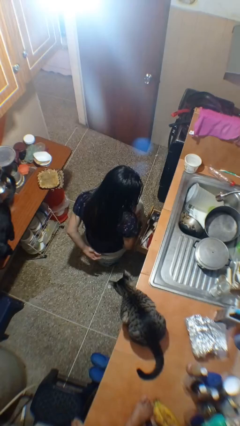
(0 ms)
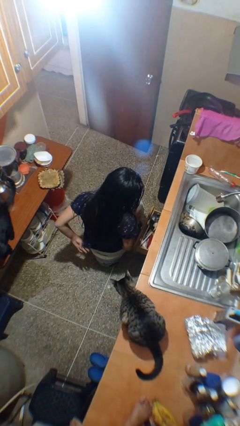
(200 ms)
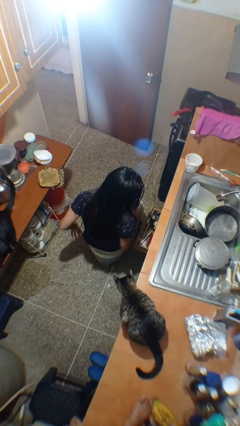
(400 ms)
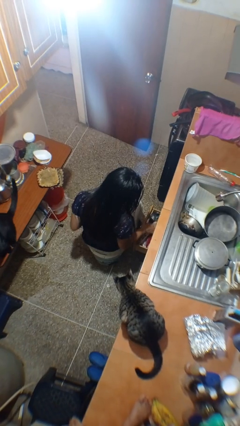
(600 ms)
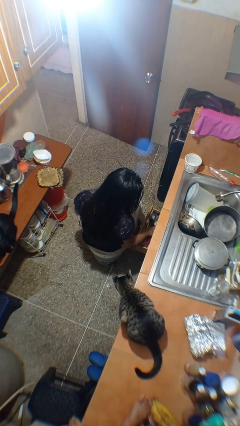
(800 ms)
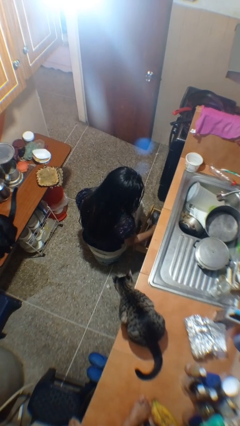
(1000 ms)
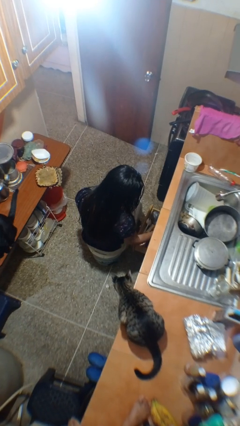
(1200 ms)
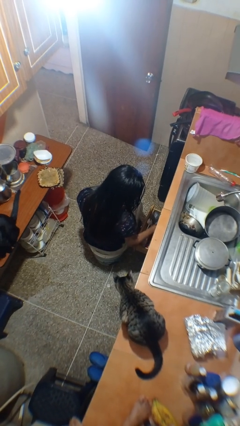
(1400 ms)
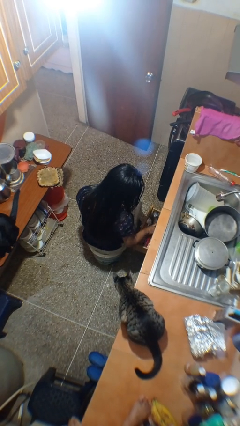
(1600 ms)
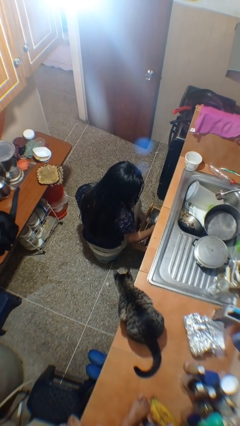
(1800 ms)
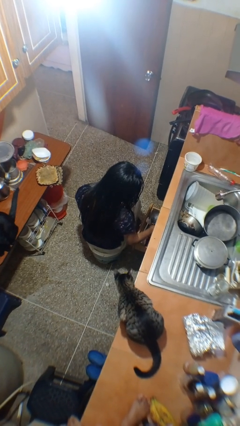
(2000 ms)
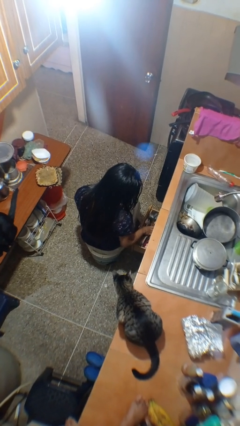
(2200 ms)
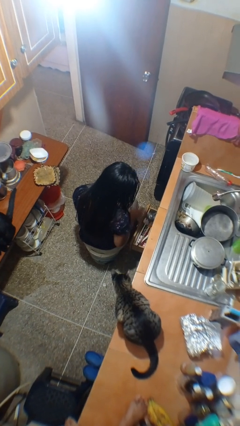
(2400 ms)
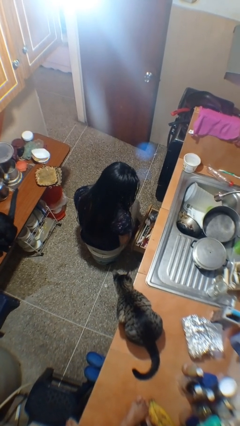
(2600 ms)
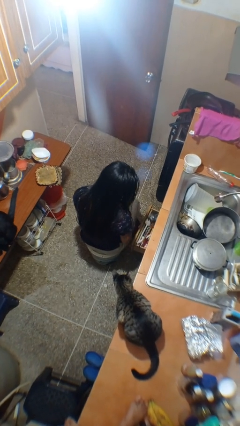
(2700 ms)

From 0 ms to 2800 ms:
person searches in kitchen drawer

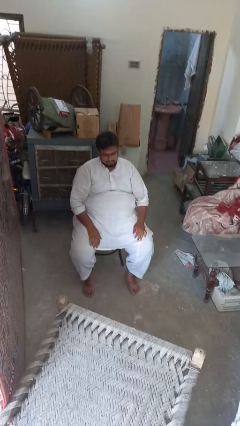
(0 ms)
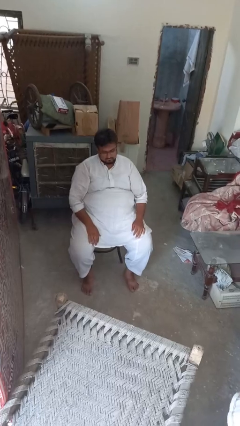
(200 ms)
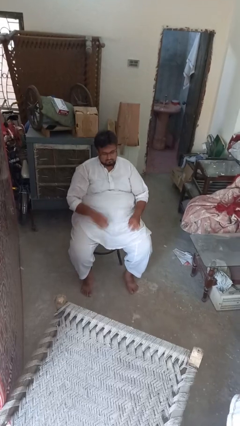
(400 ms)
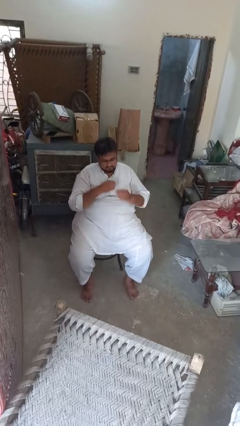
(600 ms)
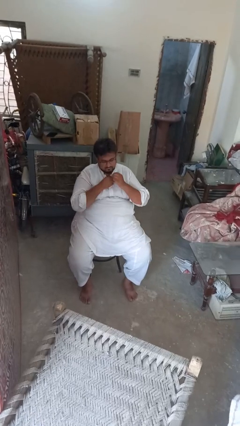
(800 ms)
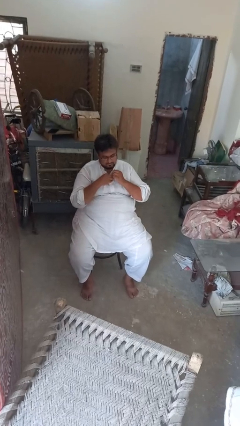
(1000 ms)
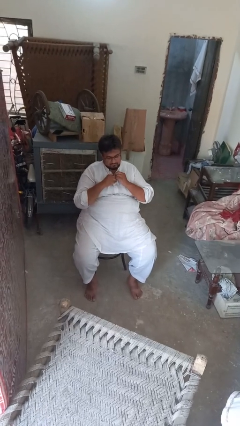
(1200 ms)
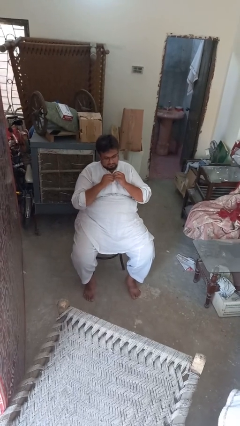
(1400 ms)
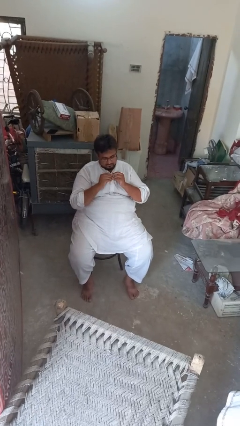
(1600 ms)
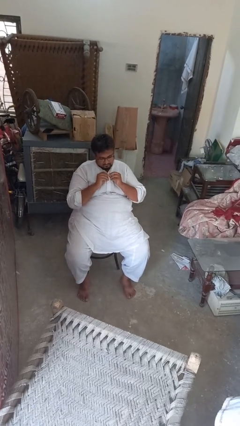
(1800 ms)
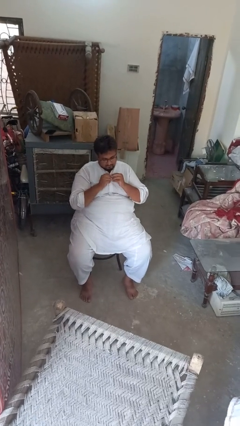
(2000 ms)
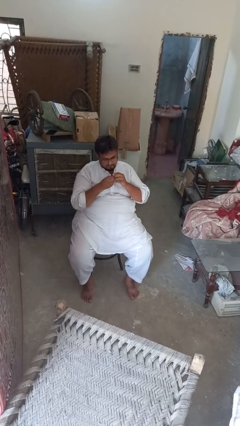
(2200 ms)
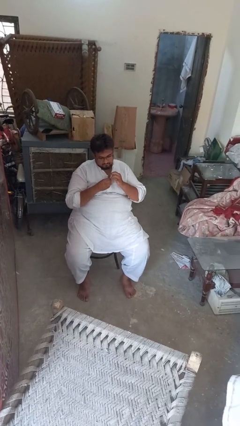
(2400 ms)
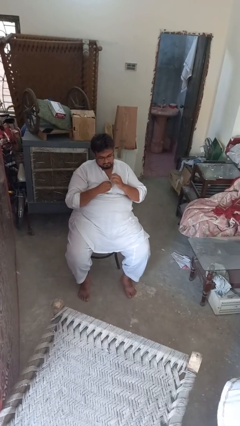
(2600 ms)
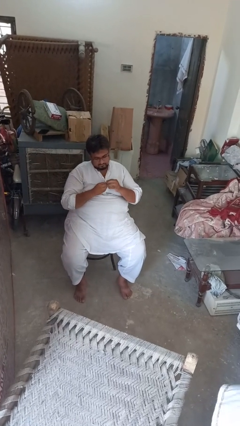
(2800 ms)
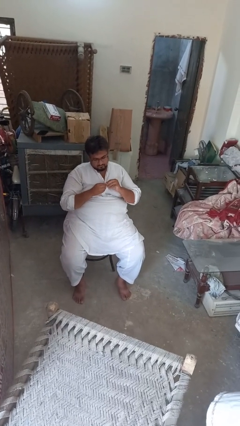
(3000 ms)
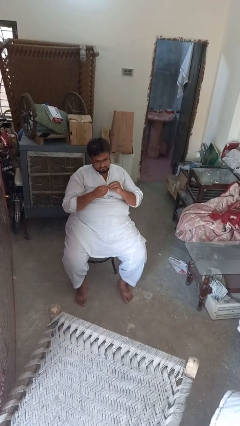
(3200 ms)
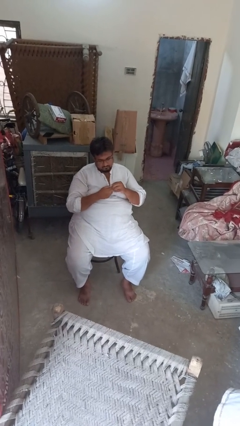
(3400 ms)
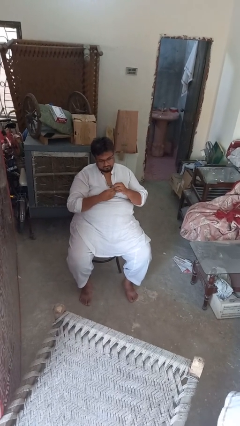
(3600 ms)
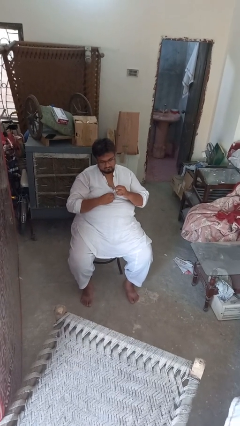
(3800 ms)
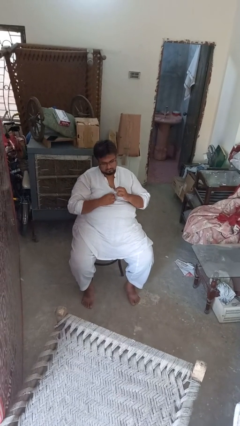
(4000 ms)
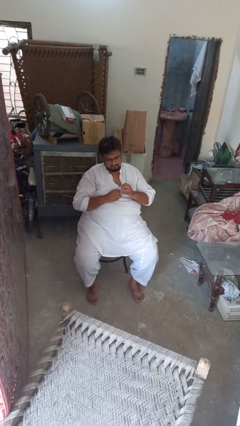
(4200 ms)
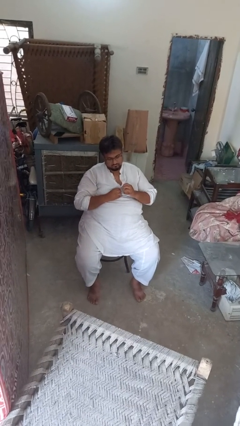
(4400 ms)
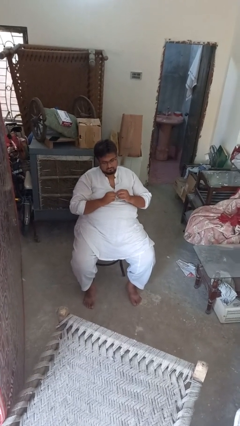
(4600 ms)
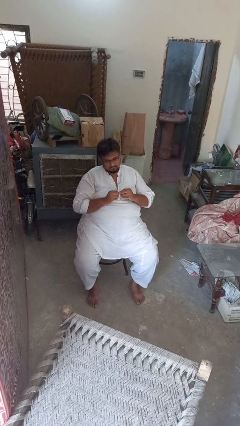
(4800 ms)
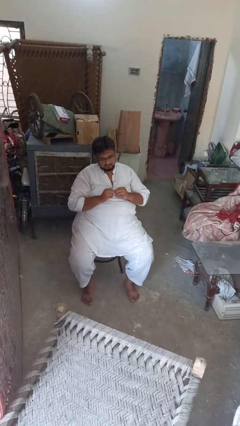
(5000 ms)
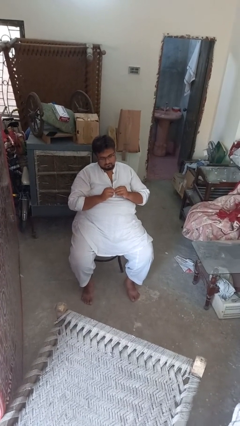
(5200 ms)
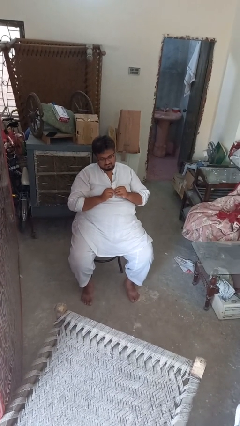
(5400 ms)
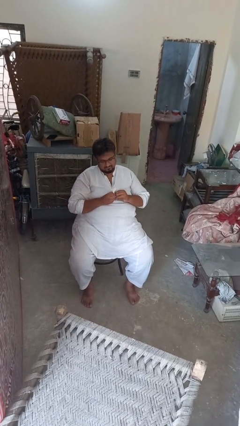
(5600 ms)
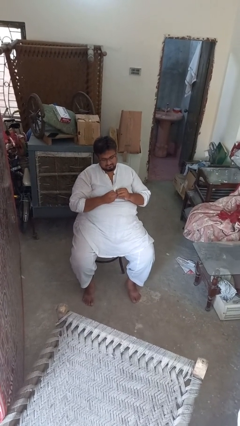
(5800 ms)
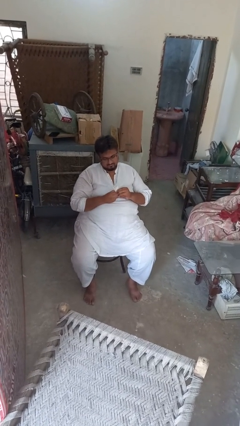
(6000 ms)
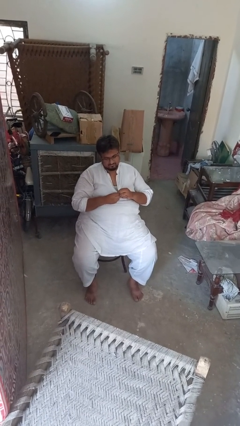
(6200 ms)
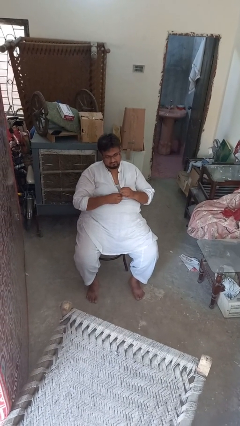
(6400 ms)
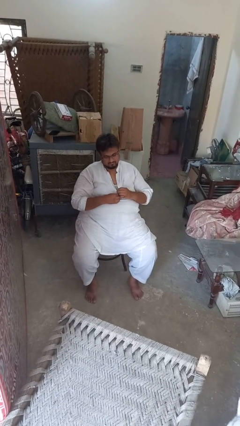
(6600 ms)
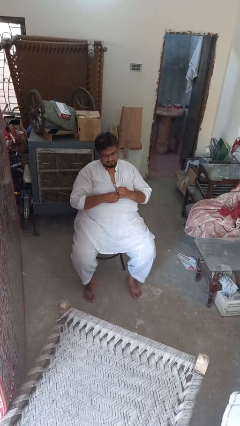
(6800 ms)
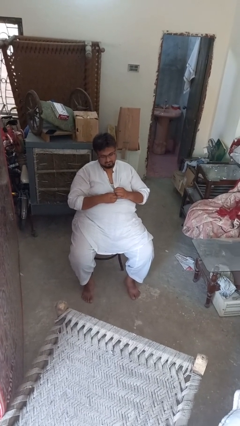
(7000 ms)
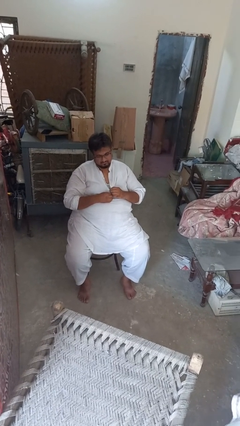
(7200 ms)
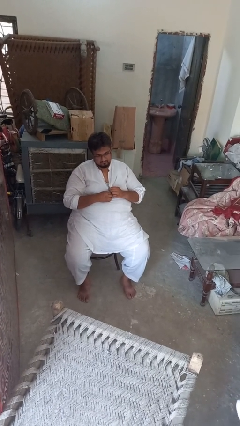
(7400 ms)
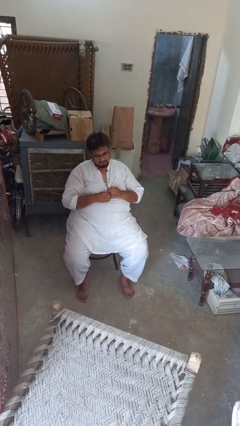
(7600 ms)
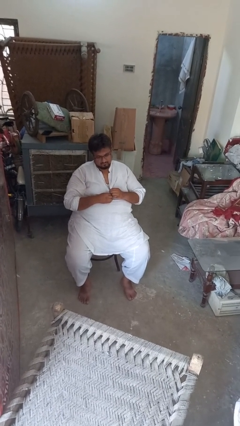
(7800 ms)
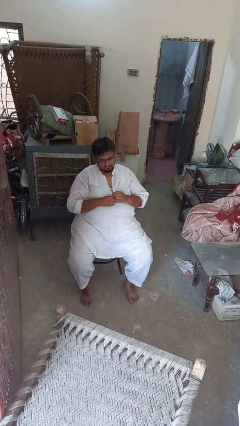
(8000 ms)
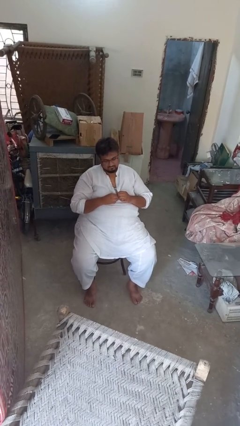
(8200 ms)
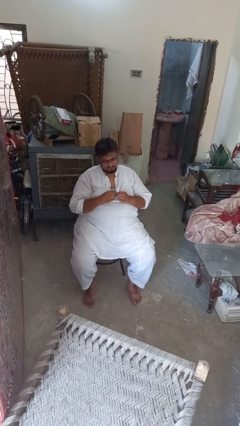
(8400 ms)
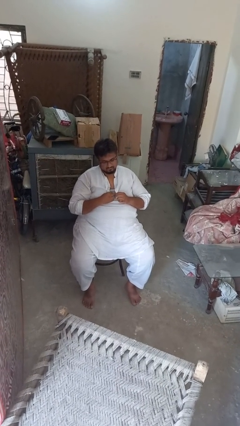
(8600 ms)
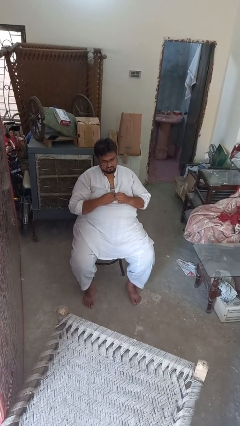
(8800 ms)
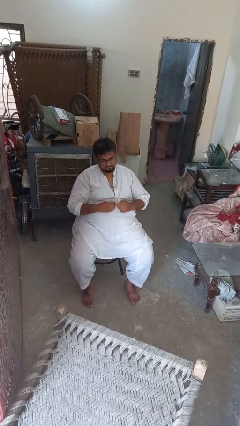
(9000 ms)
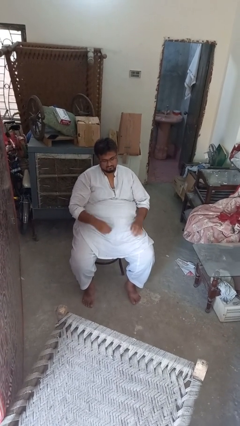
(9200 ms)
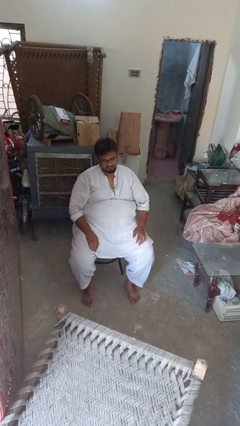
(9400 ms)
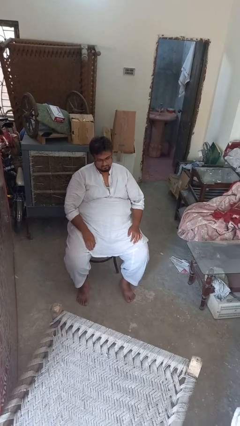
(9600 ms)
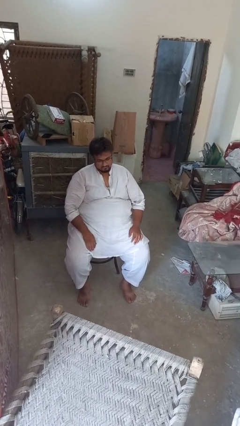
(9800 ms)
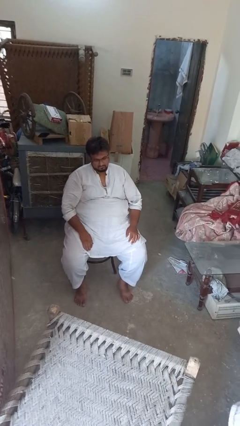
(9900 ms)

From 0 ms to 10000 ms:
person unbuttons shirt

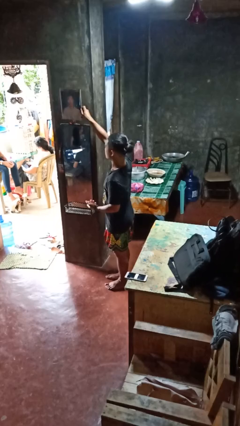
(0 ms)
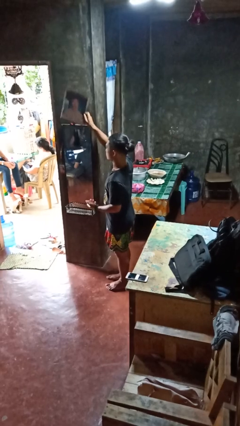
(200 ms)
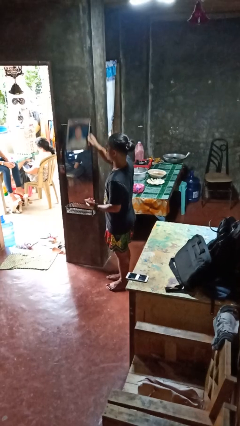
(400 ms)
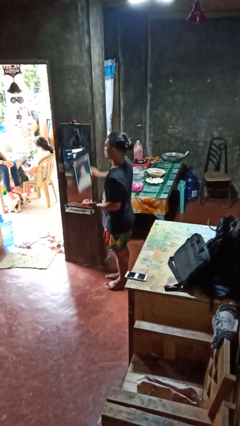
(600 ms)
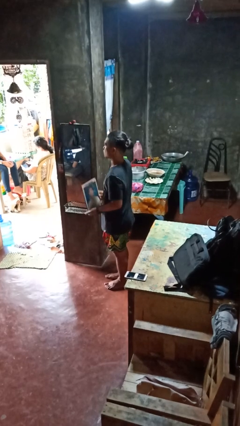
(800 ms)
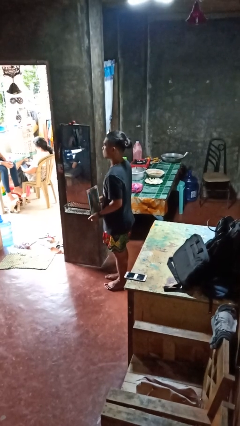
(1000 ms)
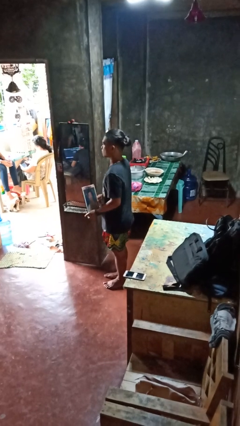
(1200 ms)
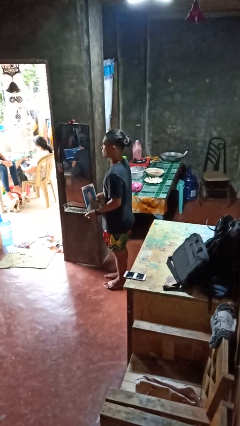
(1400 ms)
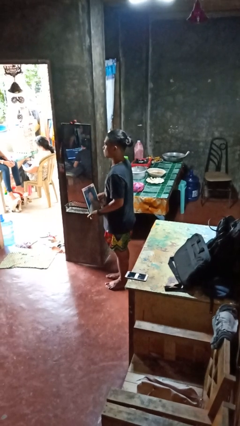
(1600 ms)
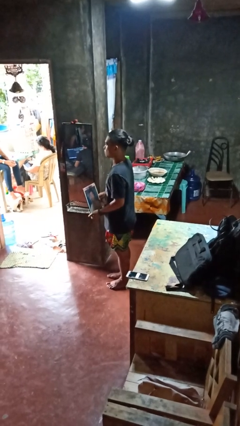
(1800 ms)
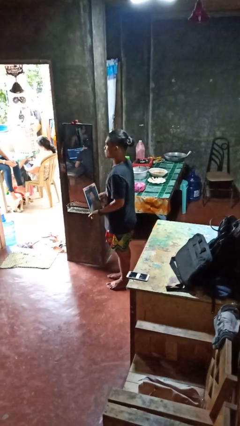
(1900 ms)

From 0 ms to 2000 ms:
person takes down picture frame

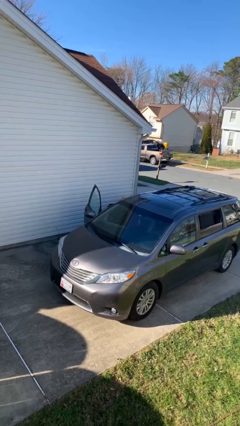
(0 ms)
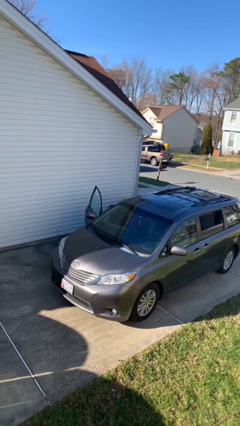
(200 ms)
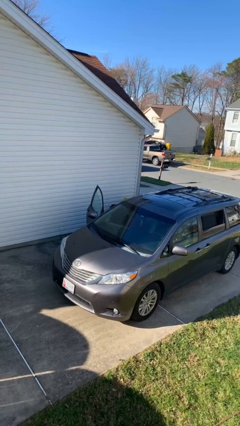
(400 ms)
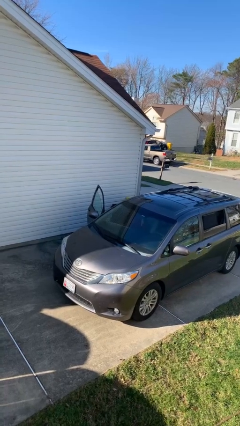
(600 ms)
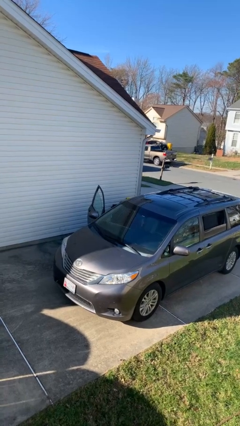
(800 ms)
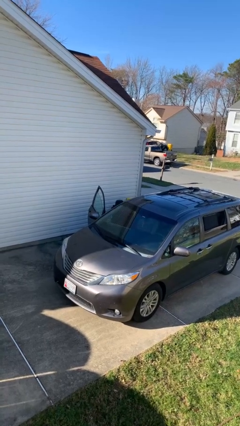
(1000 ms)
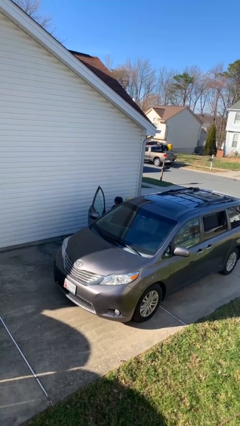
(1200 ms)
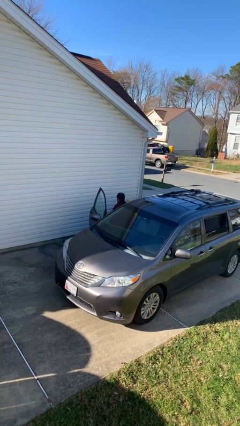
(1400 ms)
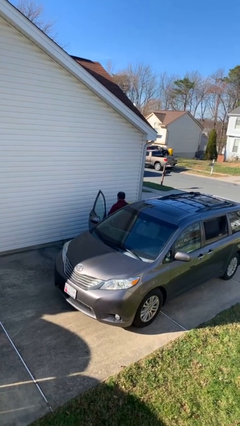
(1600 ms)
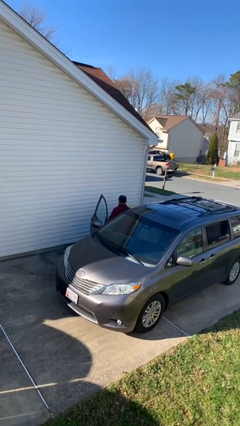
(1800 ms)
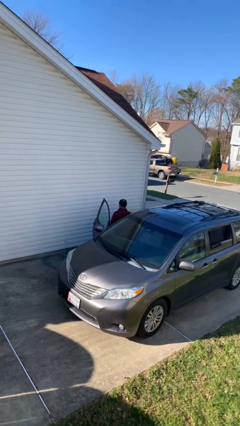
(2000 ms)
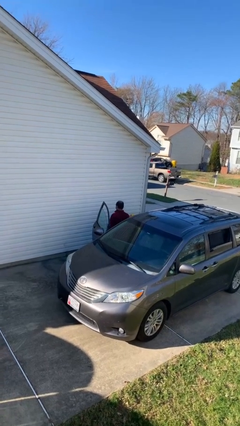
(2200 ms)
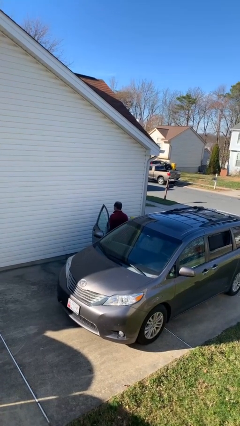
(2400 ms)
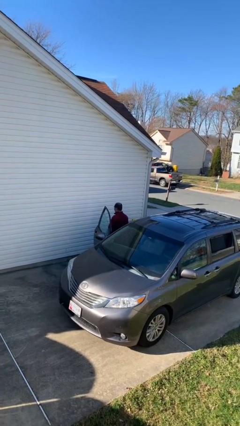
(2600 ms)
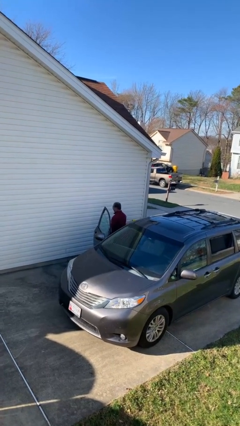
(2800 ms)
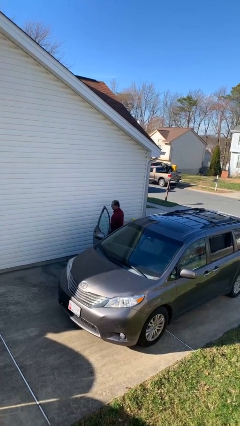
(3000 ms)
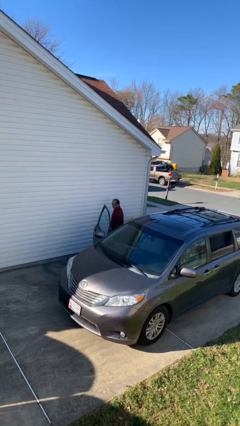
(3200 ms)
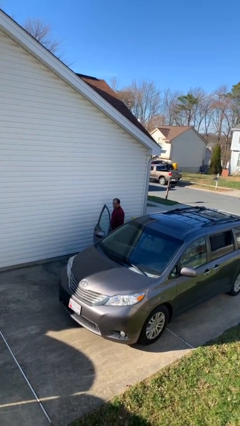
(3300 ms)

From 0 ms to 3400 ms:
person exits car
